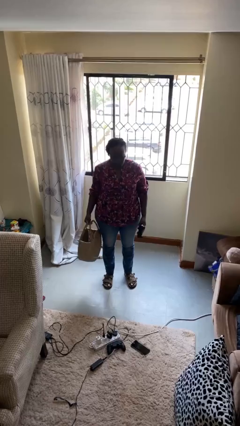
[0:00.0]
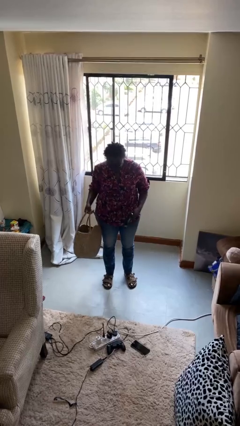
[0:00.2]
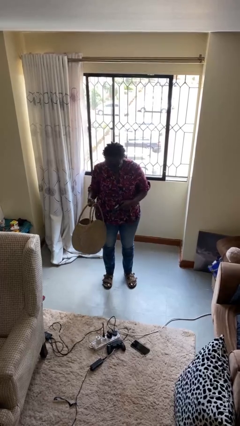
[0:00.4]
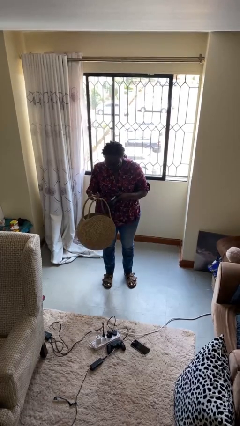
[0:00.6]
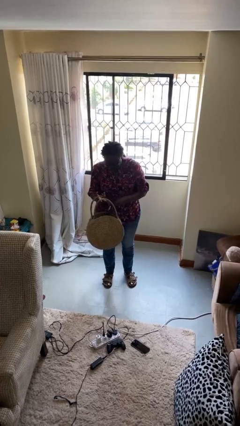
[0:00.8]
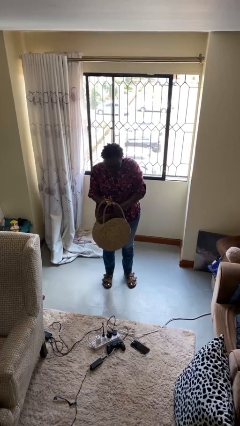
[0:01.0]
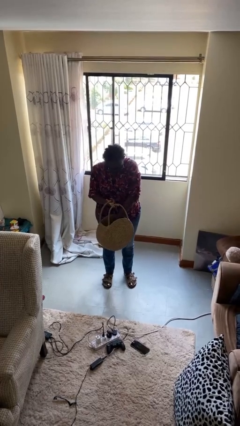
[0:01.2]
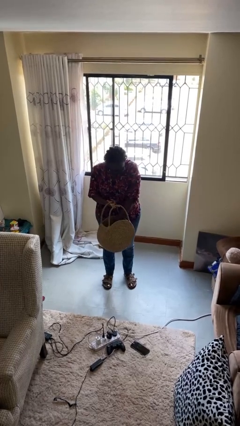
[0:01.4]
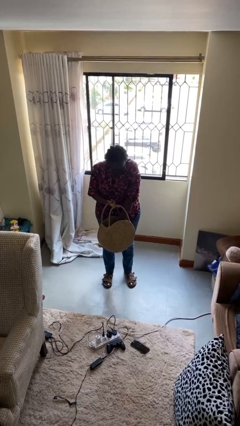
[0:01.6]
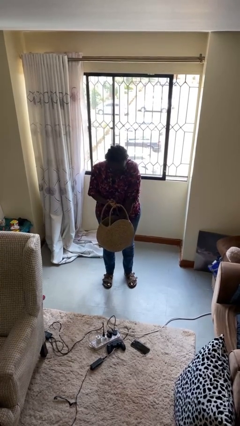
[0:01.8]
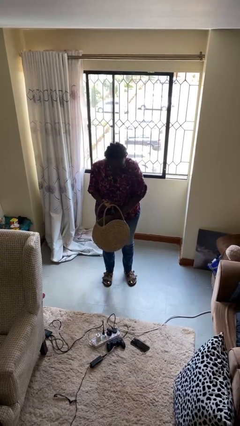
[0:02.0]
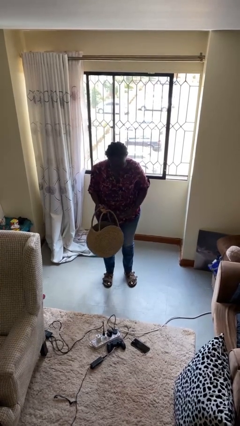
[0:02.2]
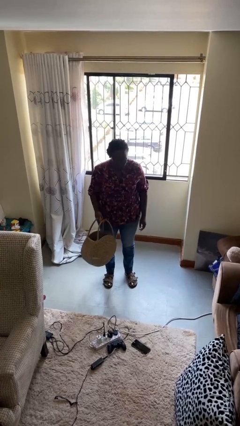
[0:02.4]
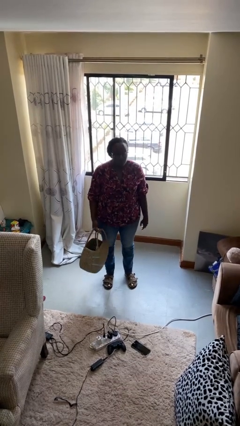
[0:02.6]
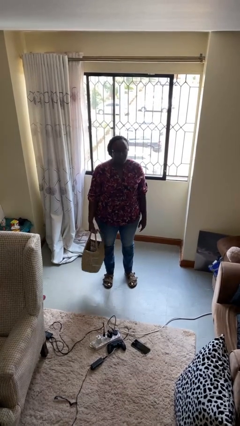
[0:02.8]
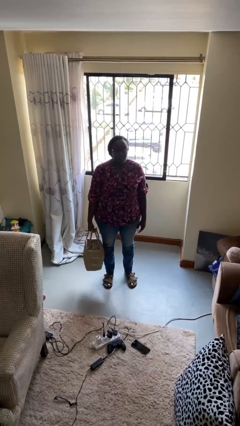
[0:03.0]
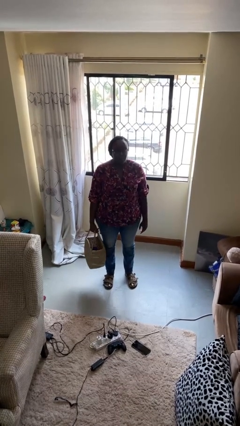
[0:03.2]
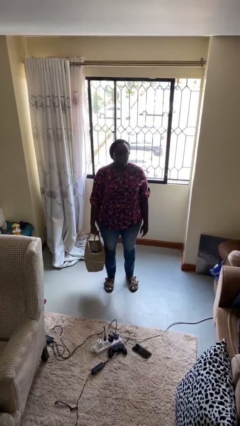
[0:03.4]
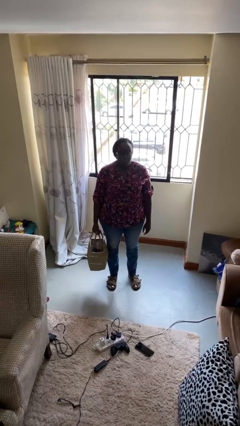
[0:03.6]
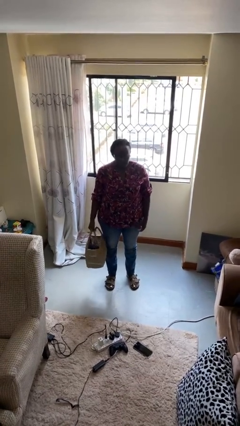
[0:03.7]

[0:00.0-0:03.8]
person puts object into basket

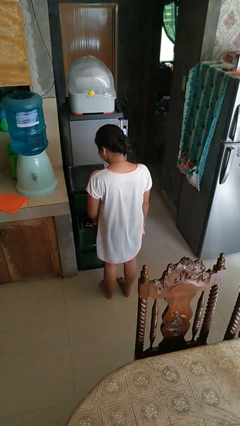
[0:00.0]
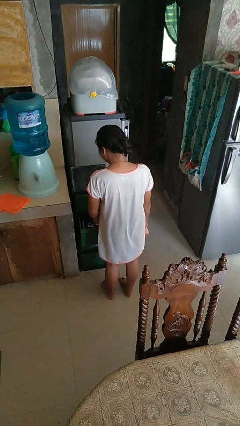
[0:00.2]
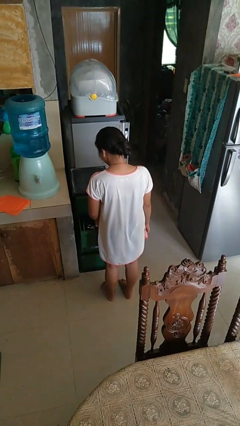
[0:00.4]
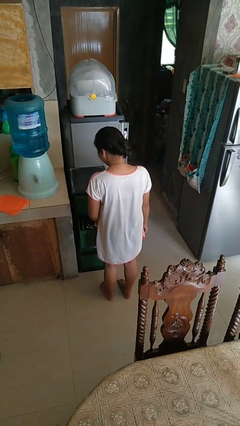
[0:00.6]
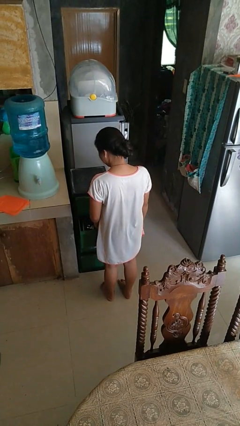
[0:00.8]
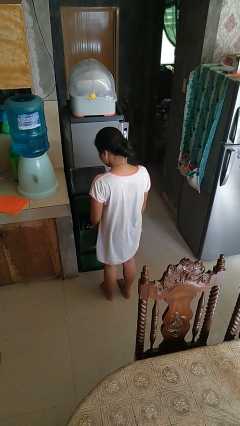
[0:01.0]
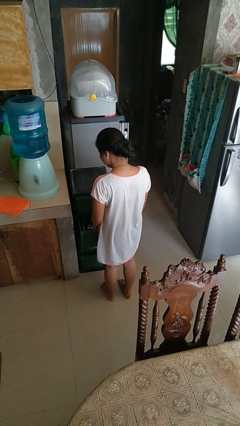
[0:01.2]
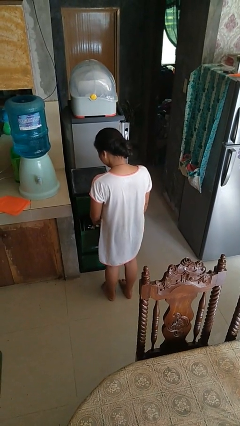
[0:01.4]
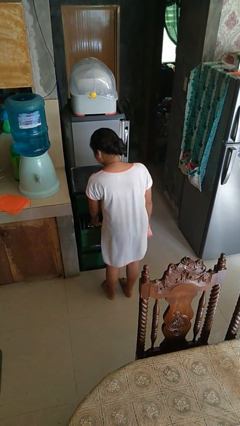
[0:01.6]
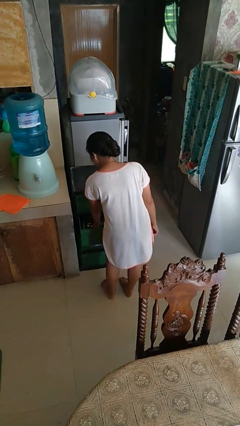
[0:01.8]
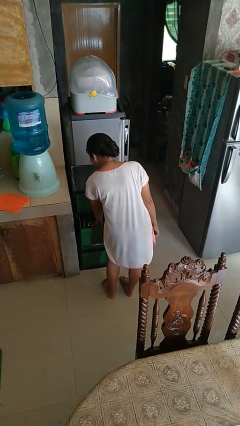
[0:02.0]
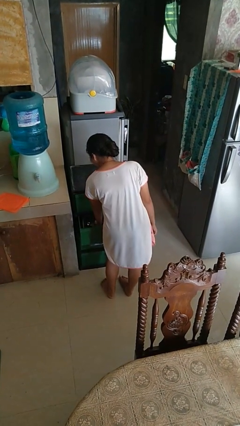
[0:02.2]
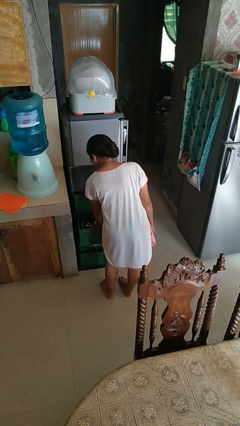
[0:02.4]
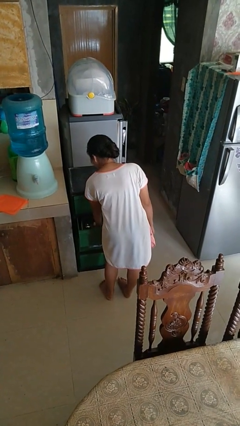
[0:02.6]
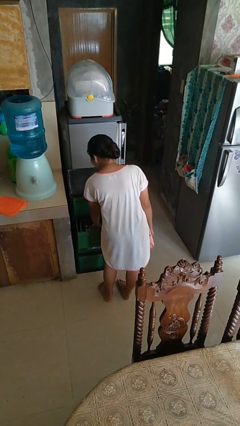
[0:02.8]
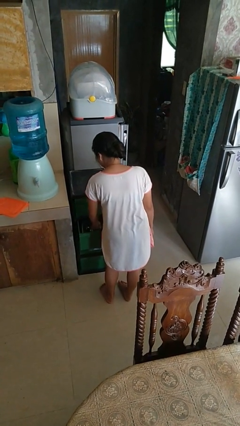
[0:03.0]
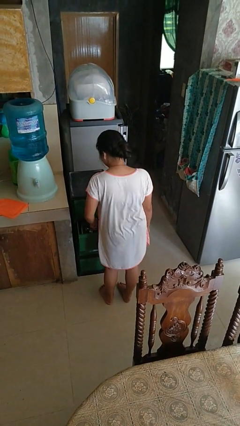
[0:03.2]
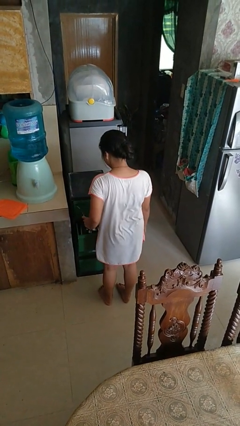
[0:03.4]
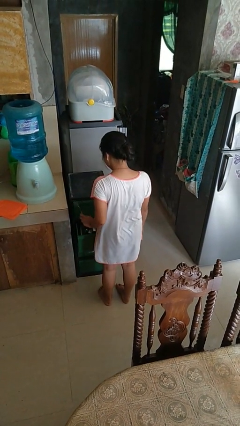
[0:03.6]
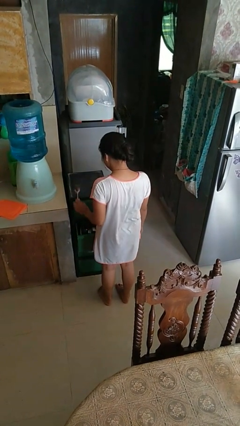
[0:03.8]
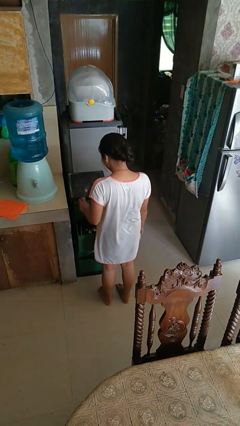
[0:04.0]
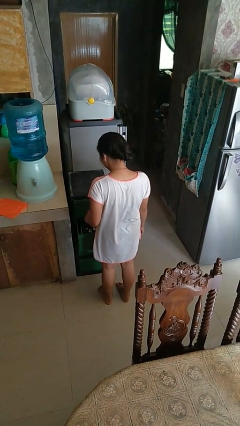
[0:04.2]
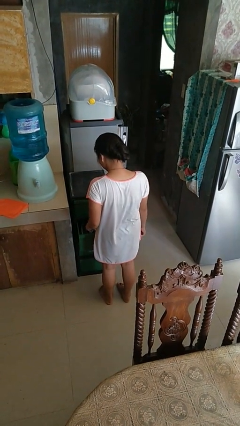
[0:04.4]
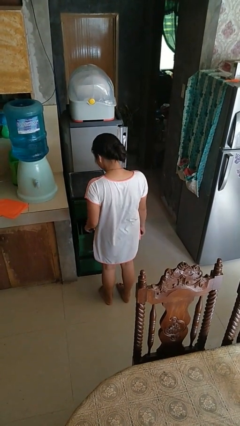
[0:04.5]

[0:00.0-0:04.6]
person takes object from kitchen drawer

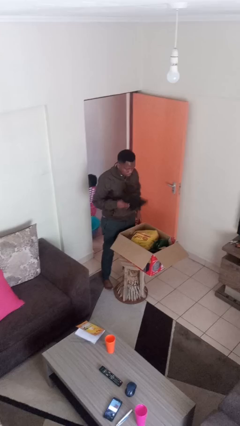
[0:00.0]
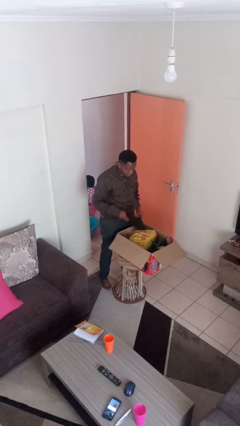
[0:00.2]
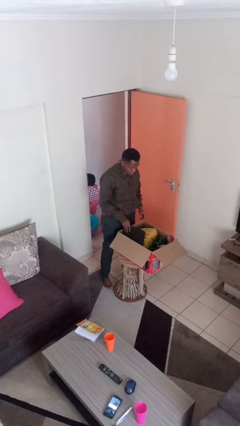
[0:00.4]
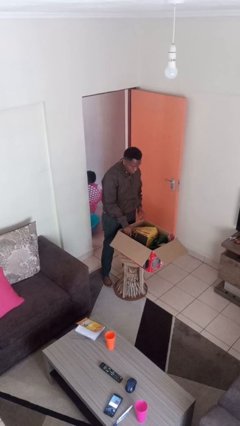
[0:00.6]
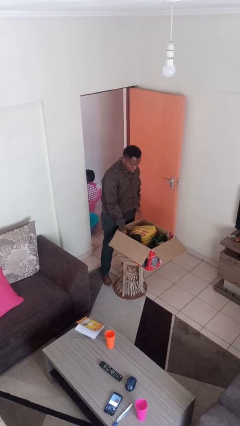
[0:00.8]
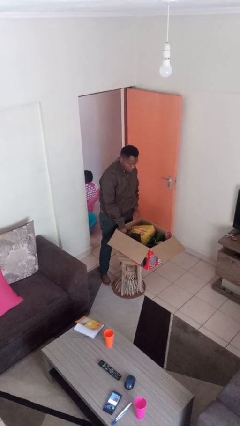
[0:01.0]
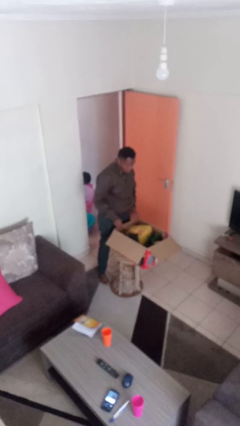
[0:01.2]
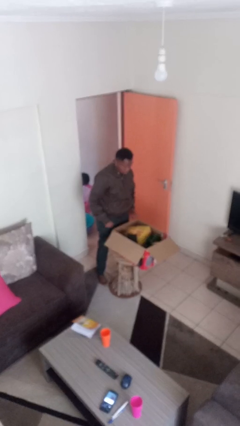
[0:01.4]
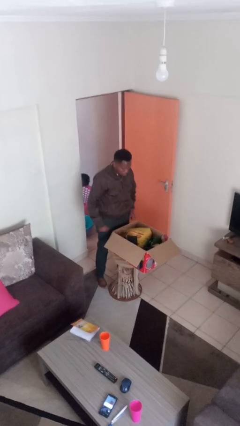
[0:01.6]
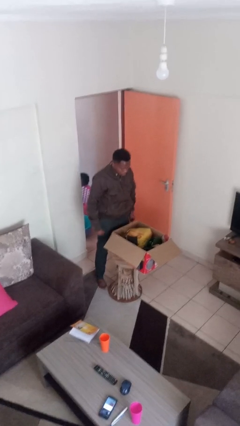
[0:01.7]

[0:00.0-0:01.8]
person puts object into box

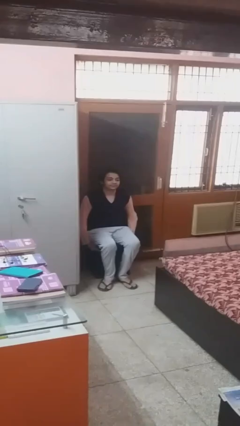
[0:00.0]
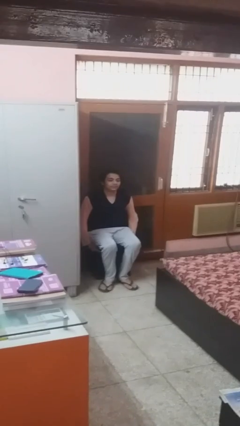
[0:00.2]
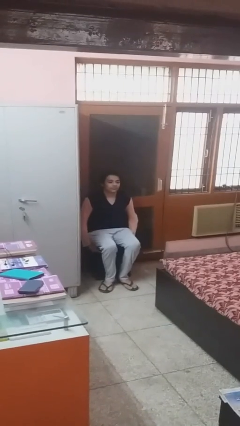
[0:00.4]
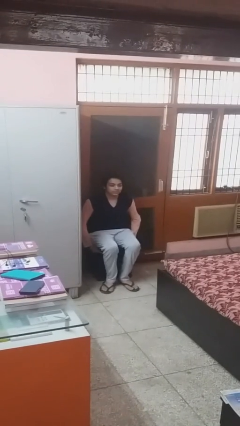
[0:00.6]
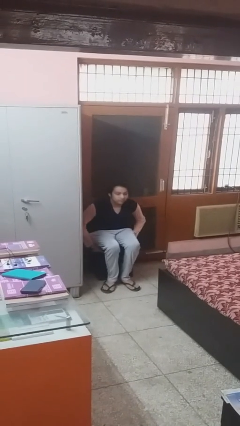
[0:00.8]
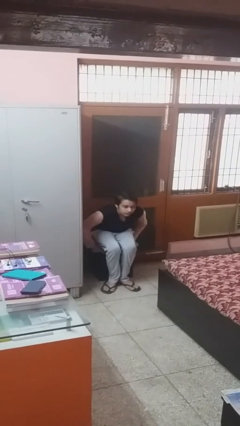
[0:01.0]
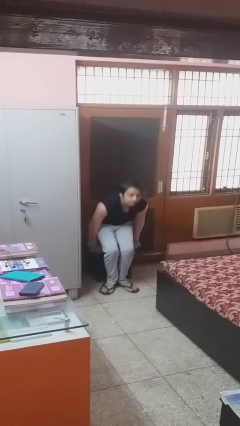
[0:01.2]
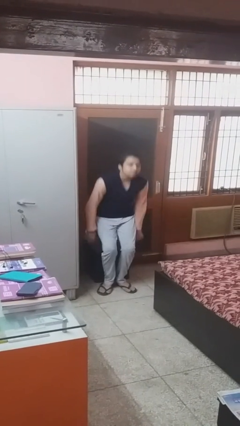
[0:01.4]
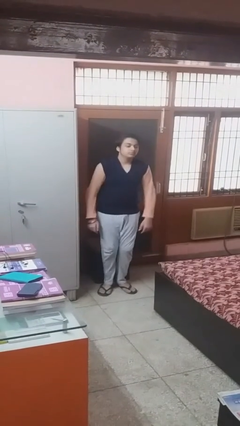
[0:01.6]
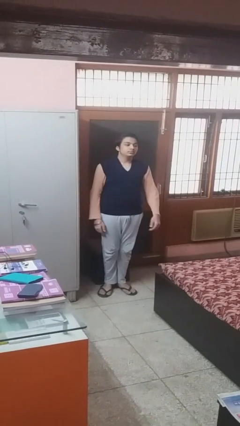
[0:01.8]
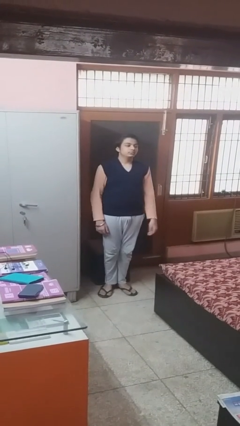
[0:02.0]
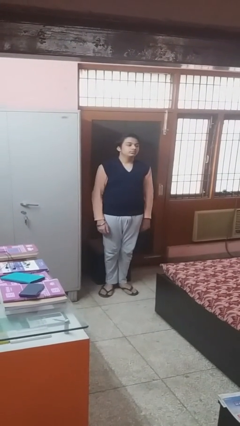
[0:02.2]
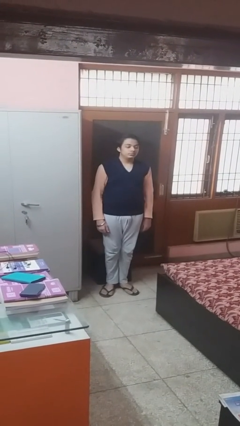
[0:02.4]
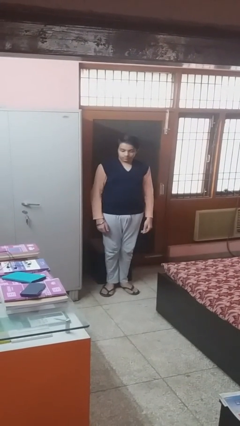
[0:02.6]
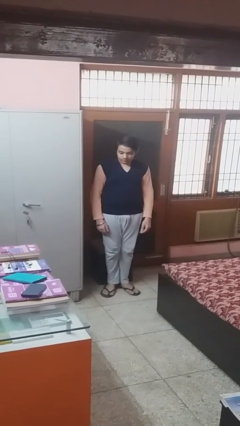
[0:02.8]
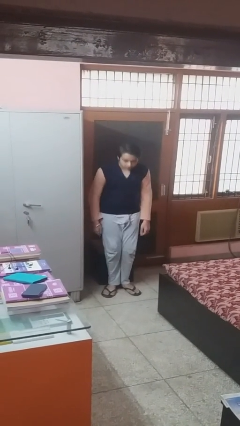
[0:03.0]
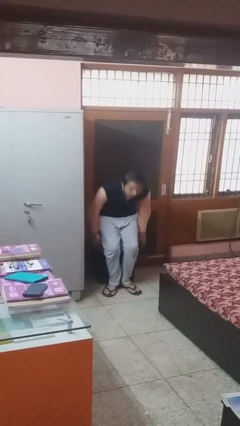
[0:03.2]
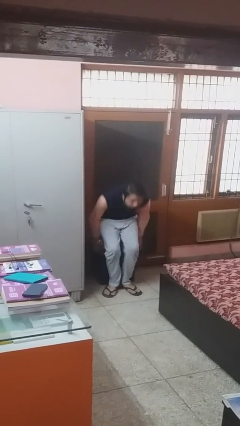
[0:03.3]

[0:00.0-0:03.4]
person stands up

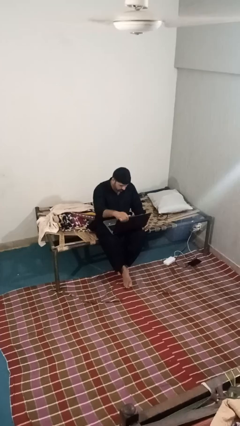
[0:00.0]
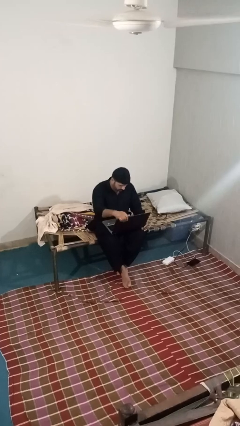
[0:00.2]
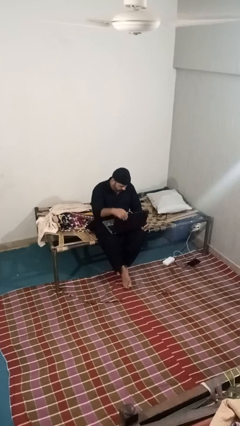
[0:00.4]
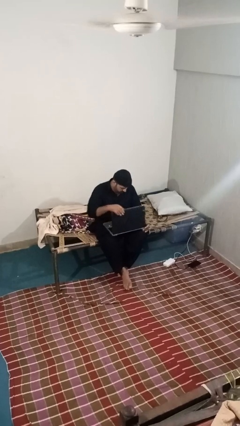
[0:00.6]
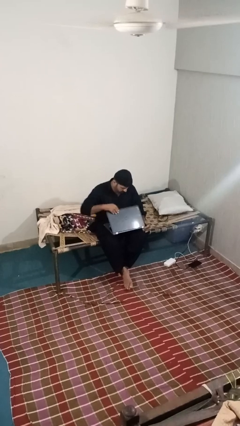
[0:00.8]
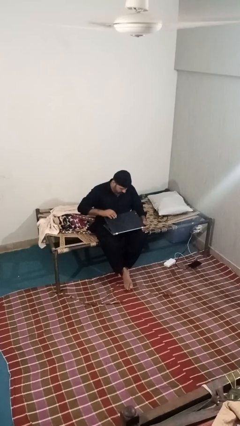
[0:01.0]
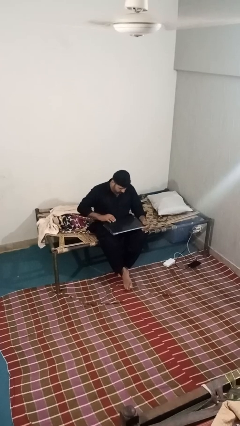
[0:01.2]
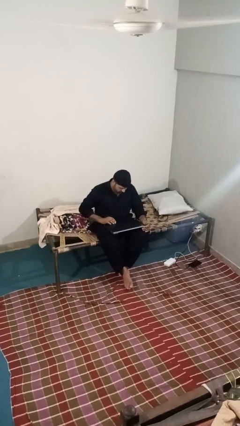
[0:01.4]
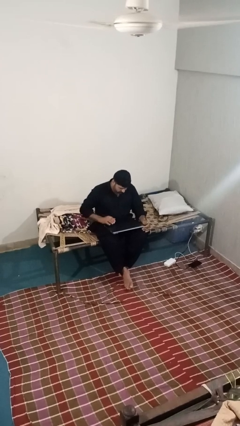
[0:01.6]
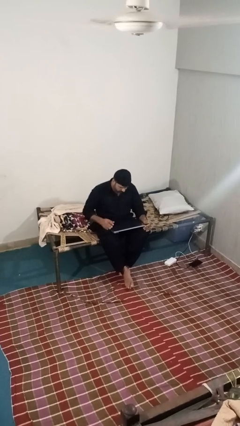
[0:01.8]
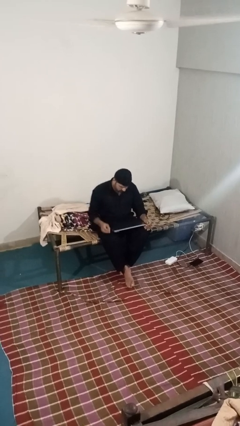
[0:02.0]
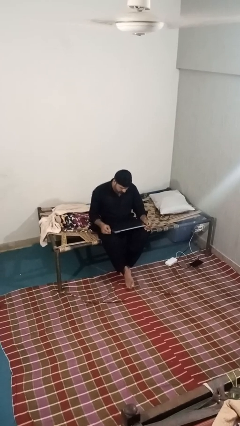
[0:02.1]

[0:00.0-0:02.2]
person closes laptop

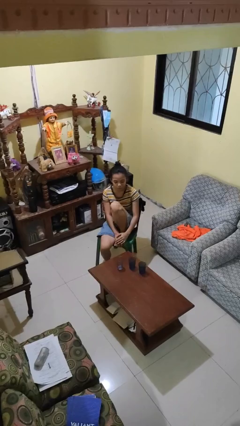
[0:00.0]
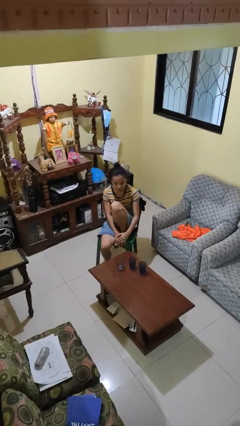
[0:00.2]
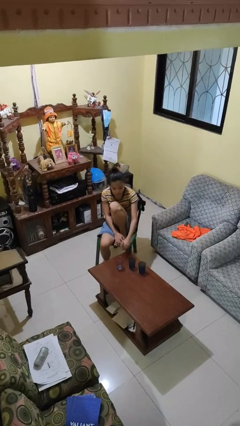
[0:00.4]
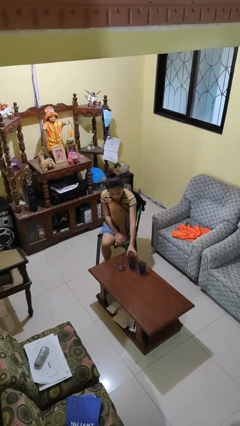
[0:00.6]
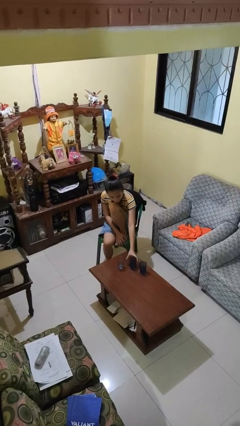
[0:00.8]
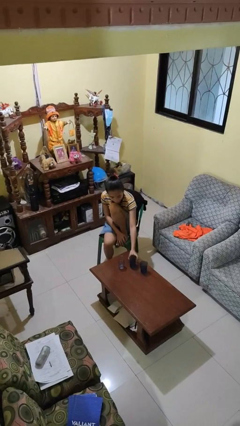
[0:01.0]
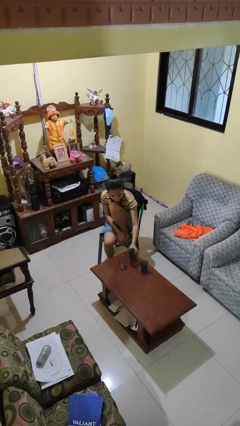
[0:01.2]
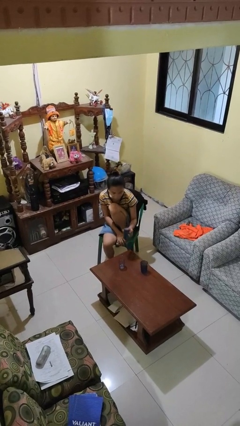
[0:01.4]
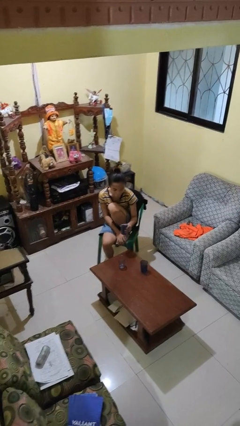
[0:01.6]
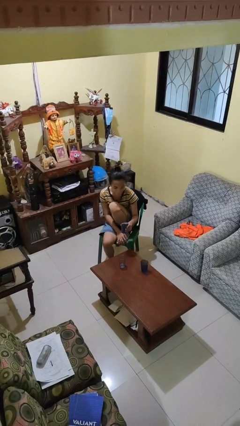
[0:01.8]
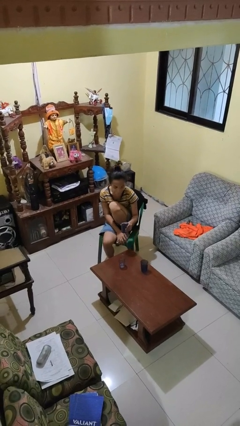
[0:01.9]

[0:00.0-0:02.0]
person picks up object from table
